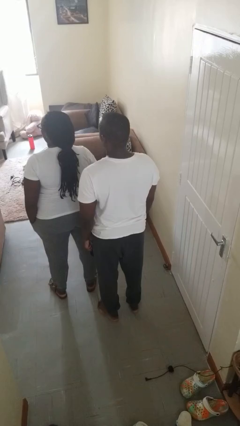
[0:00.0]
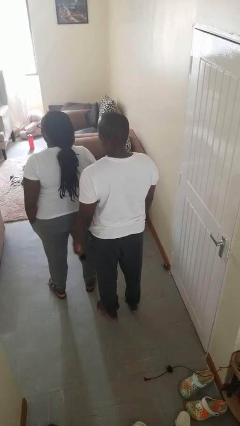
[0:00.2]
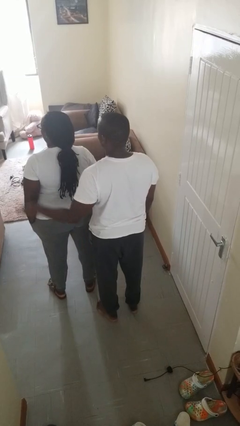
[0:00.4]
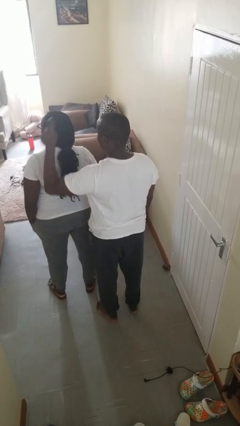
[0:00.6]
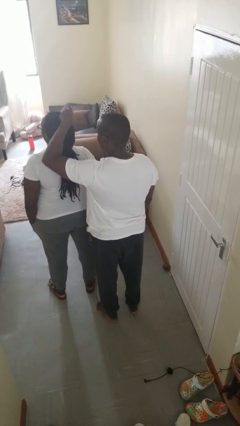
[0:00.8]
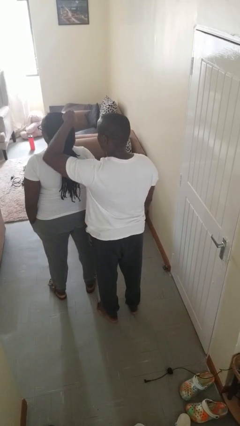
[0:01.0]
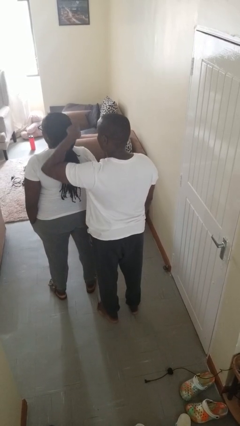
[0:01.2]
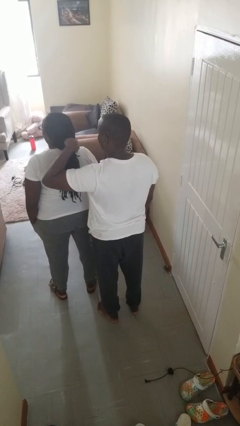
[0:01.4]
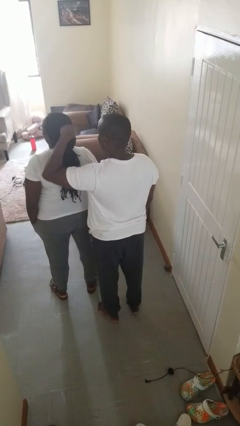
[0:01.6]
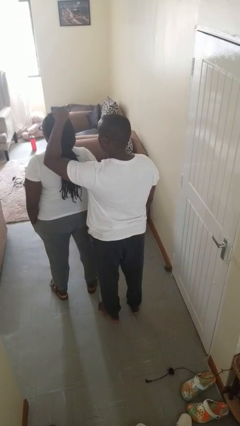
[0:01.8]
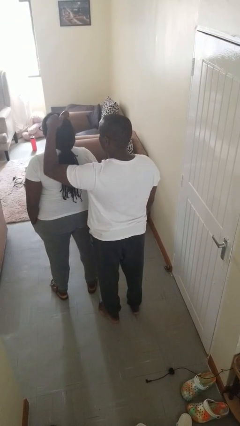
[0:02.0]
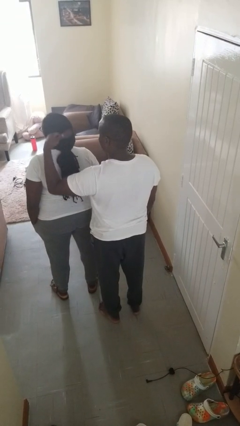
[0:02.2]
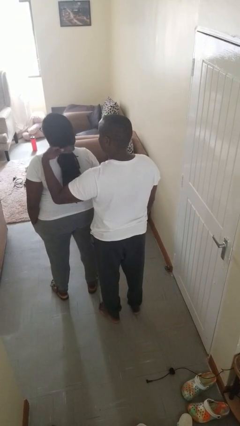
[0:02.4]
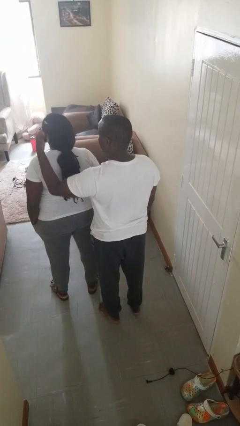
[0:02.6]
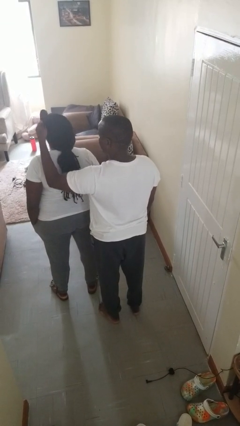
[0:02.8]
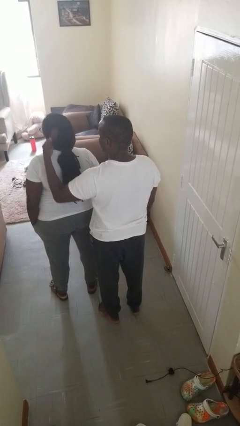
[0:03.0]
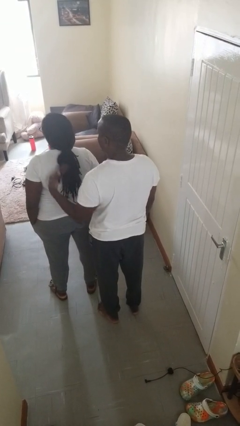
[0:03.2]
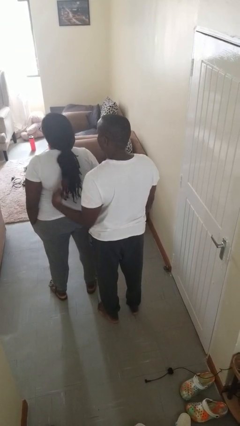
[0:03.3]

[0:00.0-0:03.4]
person brushes hair of person

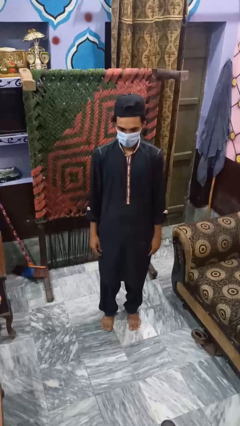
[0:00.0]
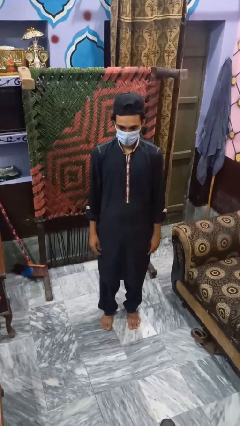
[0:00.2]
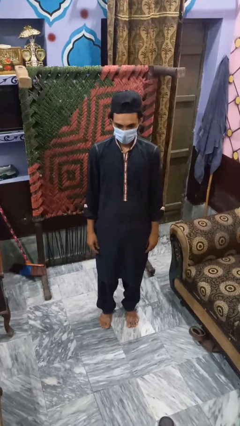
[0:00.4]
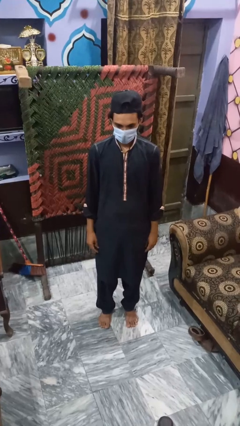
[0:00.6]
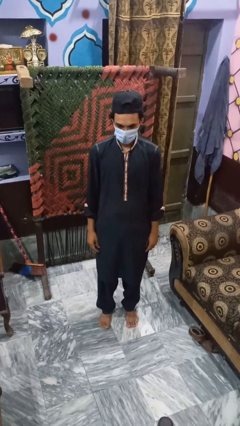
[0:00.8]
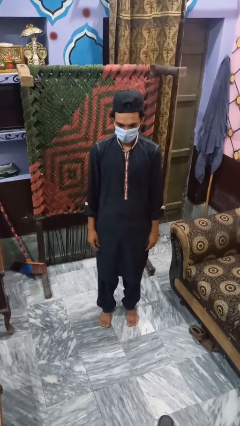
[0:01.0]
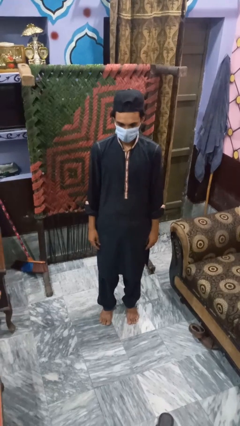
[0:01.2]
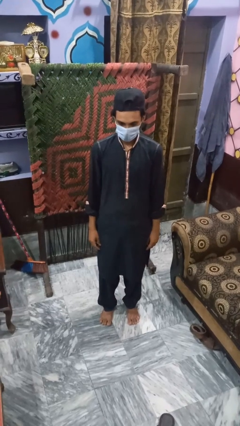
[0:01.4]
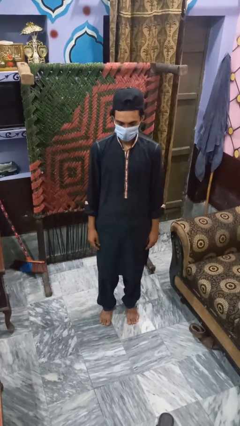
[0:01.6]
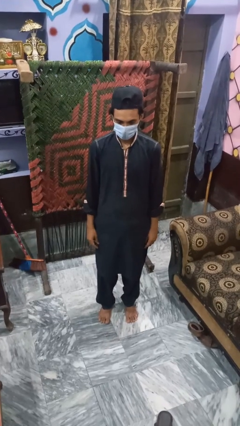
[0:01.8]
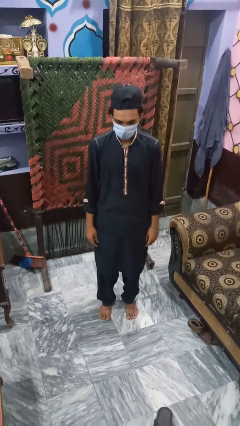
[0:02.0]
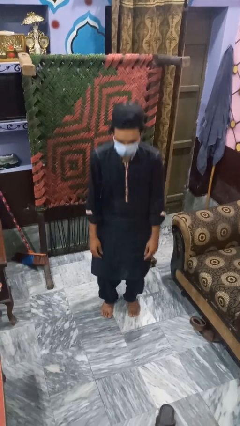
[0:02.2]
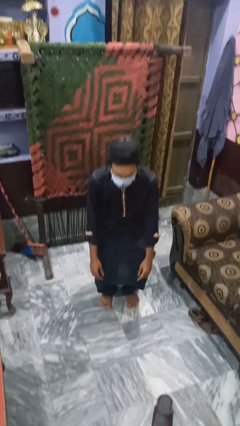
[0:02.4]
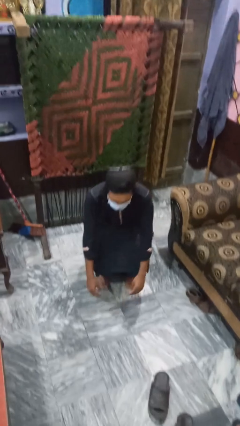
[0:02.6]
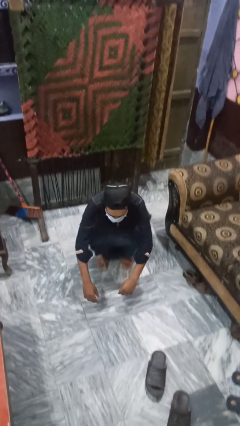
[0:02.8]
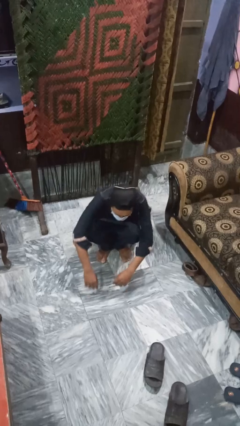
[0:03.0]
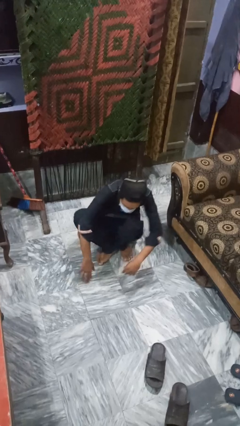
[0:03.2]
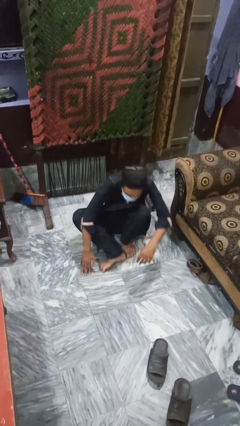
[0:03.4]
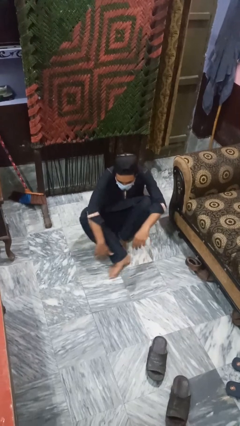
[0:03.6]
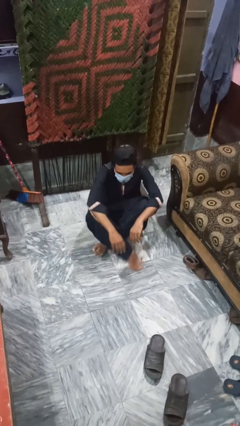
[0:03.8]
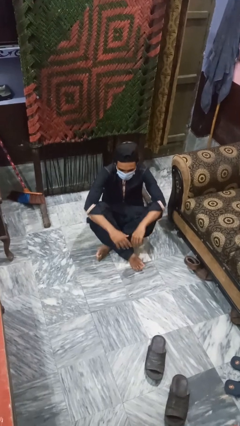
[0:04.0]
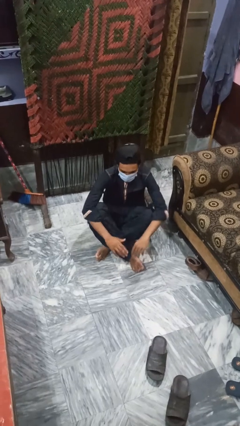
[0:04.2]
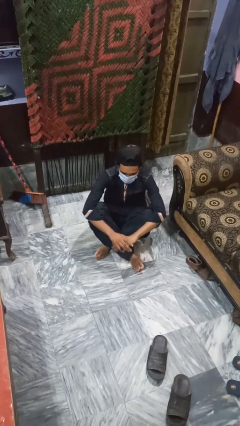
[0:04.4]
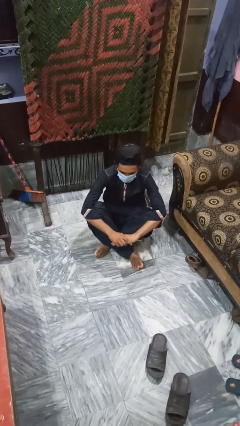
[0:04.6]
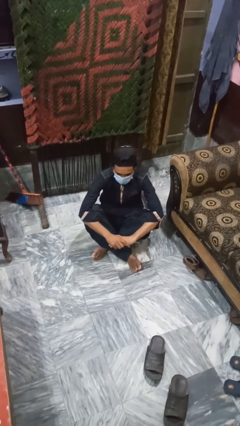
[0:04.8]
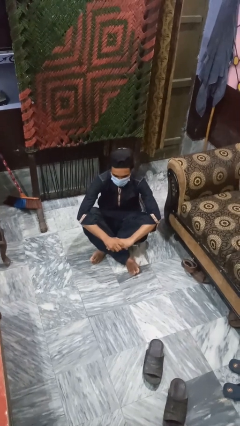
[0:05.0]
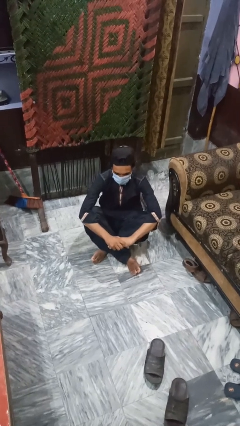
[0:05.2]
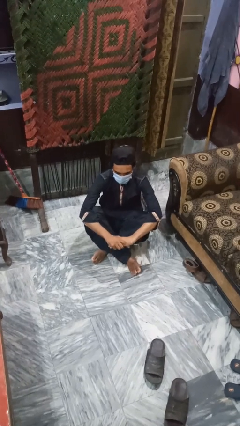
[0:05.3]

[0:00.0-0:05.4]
person sits crisscross

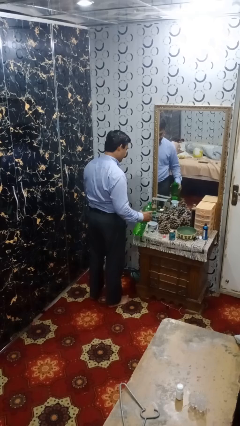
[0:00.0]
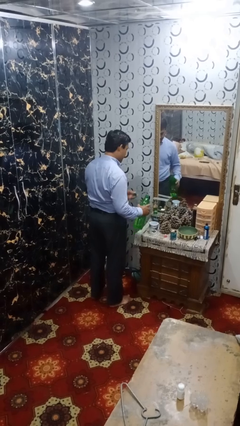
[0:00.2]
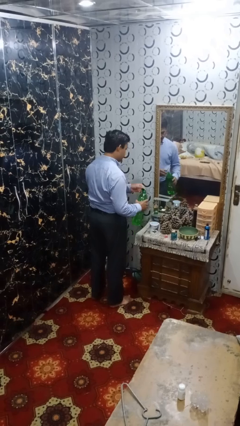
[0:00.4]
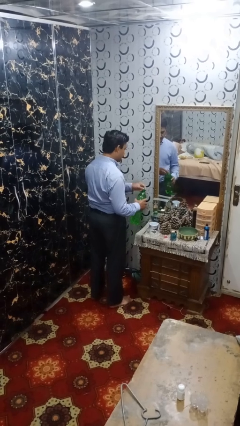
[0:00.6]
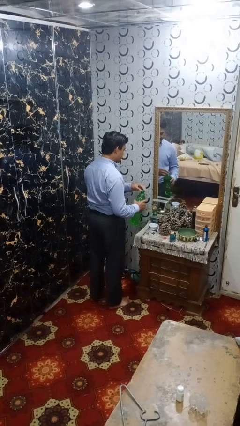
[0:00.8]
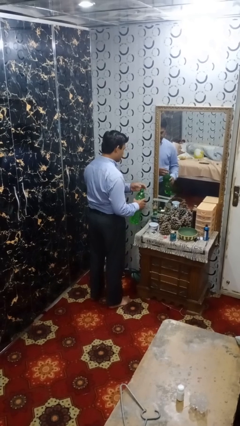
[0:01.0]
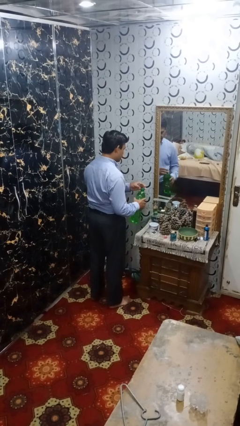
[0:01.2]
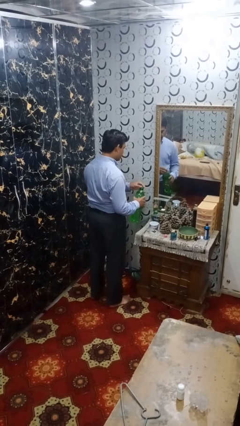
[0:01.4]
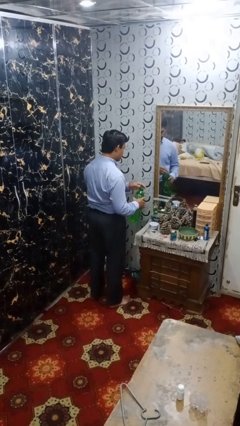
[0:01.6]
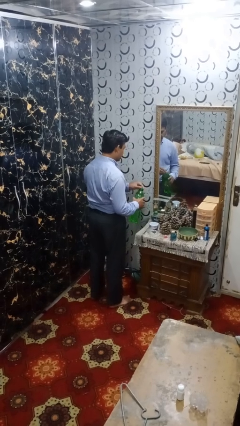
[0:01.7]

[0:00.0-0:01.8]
person screws lid to bottle

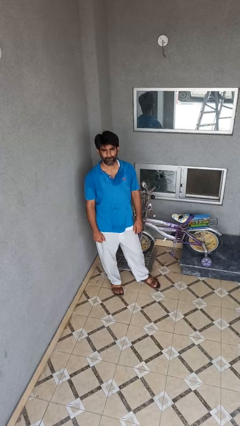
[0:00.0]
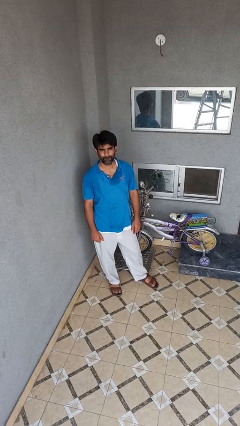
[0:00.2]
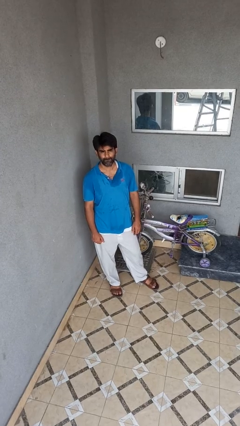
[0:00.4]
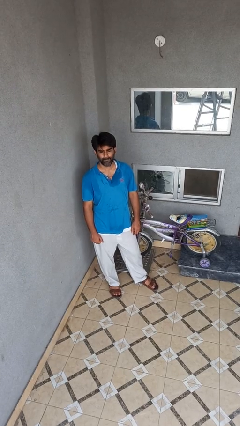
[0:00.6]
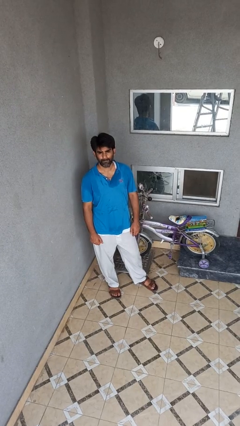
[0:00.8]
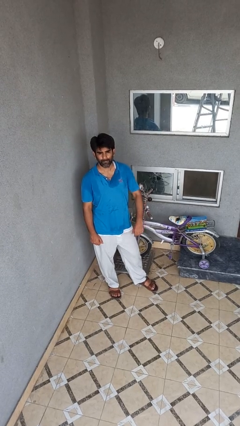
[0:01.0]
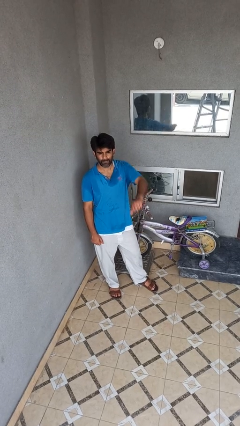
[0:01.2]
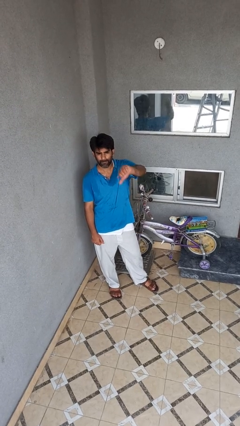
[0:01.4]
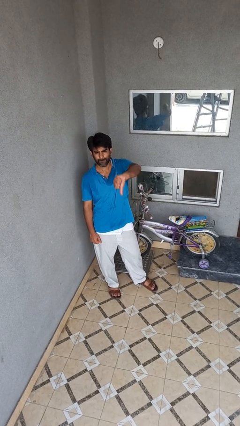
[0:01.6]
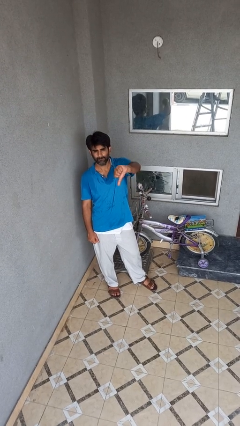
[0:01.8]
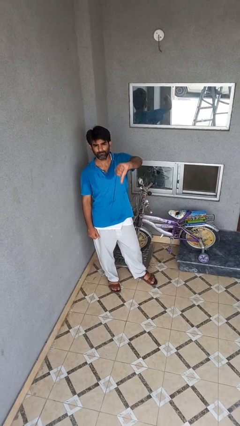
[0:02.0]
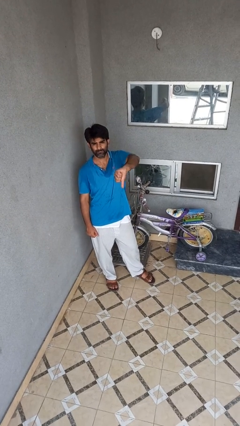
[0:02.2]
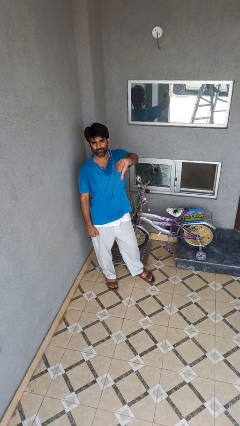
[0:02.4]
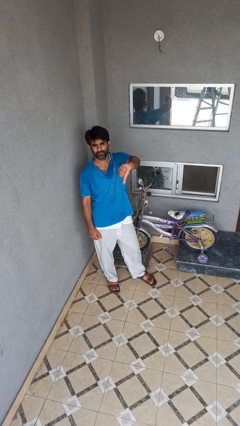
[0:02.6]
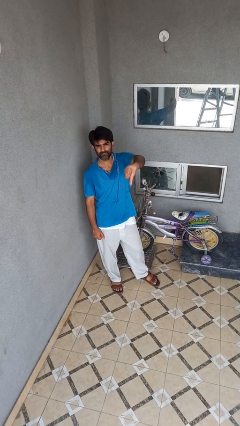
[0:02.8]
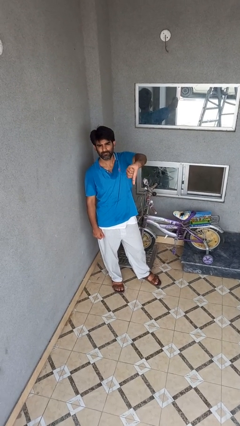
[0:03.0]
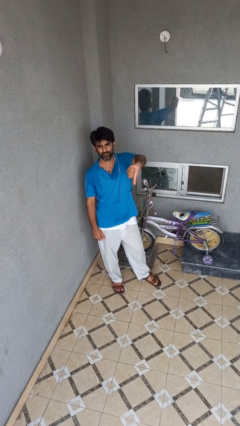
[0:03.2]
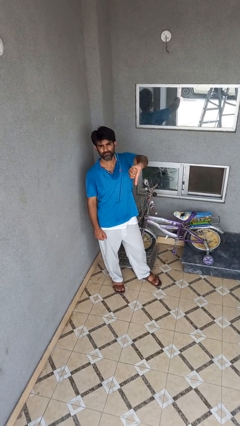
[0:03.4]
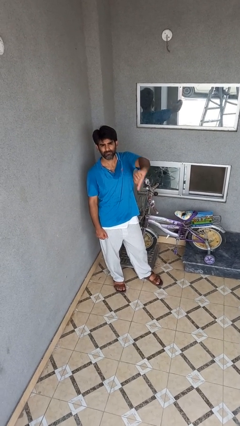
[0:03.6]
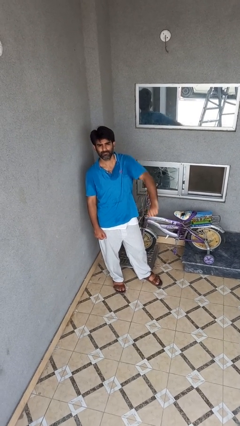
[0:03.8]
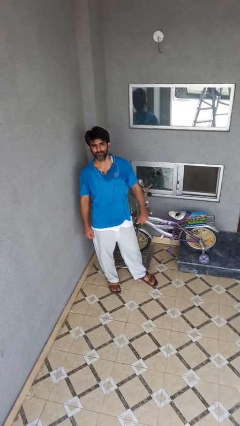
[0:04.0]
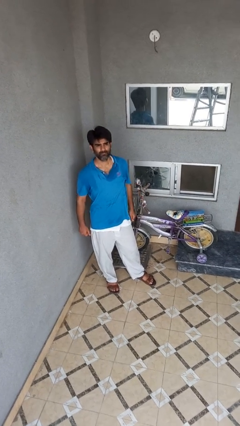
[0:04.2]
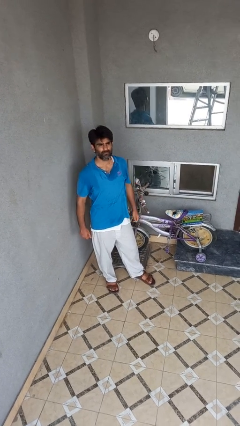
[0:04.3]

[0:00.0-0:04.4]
person gestures thumbs down

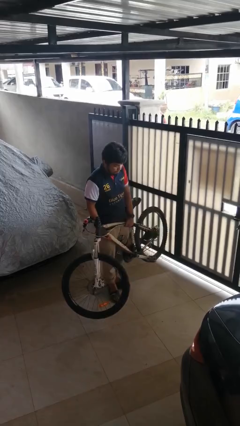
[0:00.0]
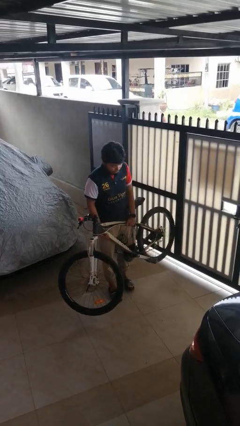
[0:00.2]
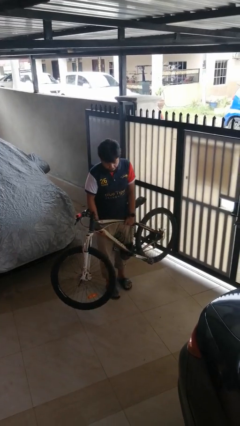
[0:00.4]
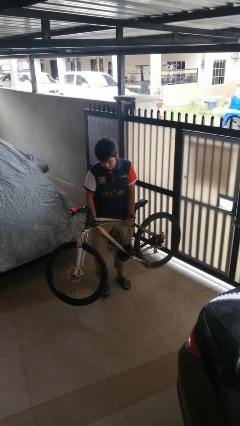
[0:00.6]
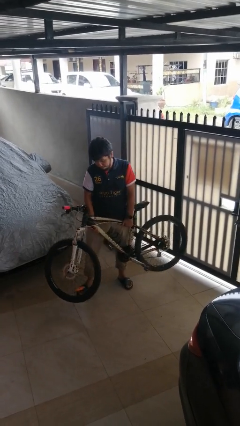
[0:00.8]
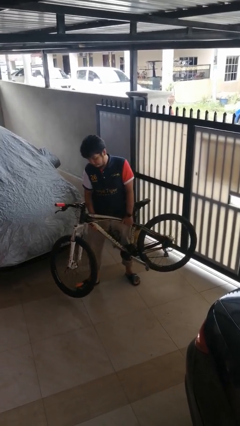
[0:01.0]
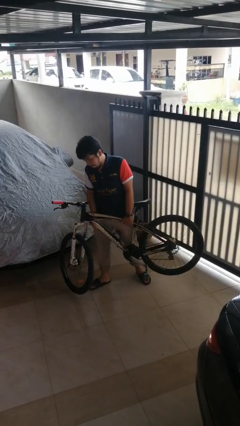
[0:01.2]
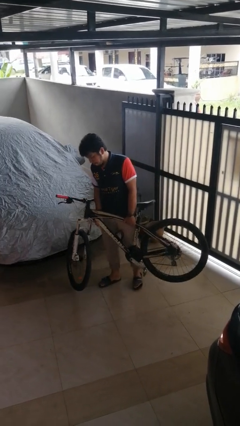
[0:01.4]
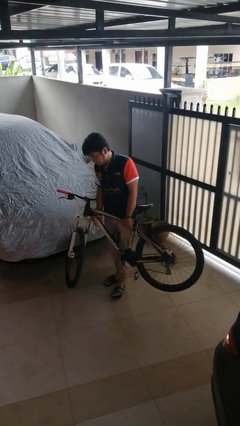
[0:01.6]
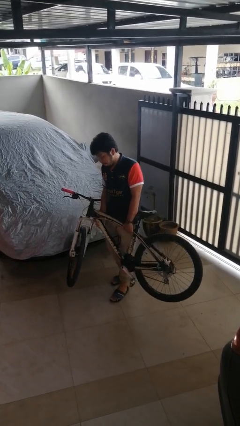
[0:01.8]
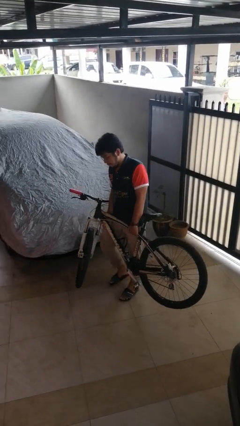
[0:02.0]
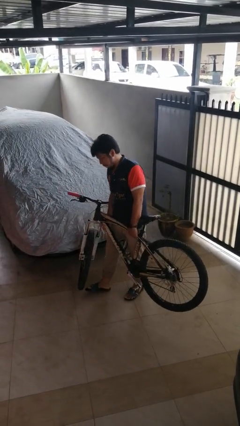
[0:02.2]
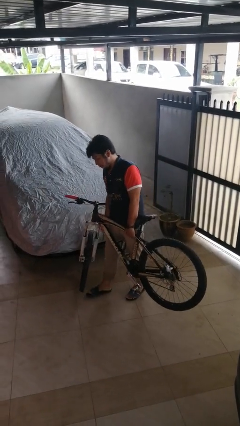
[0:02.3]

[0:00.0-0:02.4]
person carries bicycle
